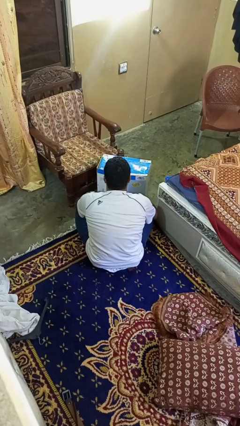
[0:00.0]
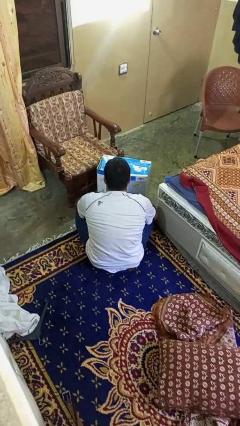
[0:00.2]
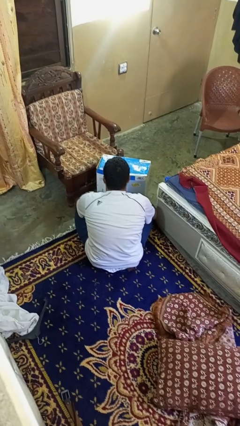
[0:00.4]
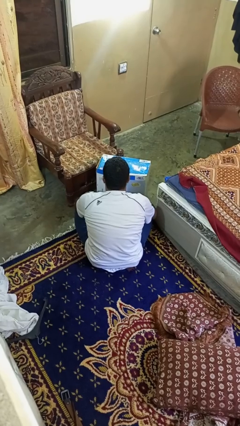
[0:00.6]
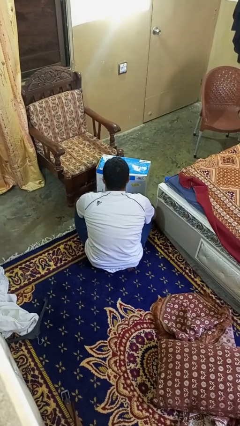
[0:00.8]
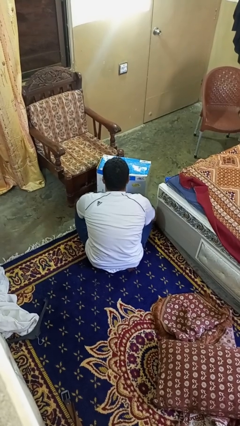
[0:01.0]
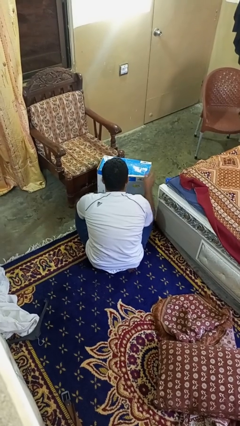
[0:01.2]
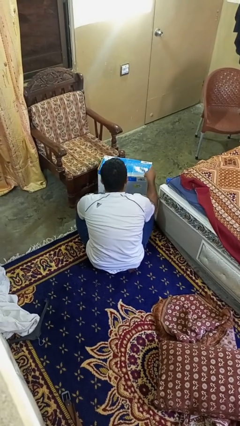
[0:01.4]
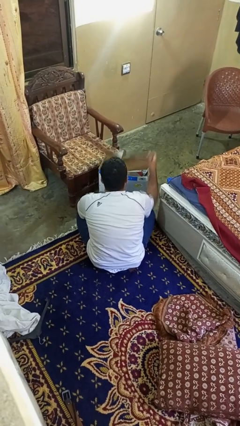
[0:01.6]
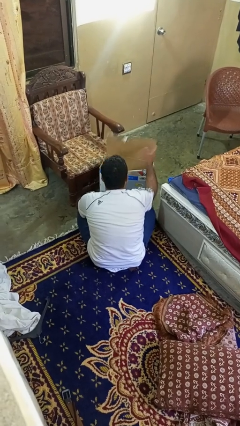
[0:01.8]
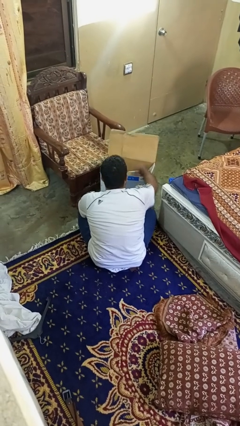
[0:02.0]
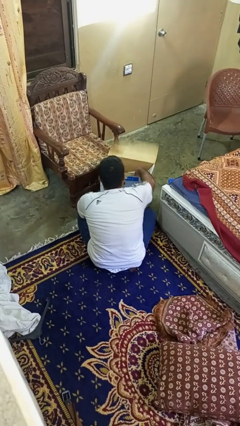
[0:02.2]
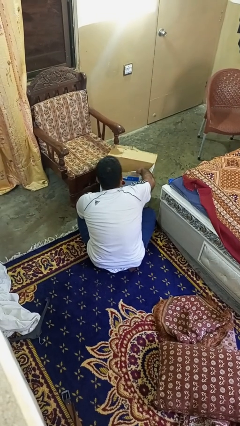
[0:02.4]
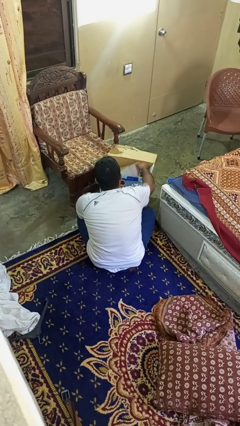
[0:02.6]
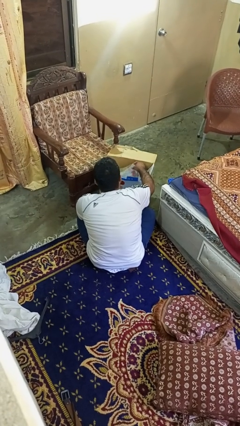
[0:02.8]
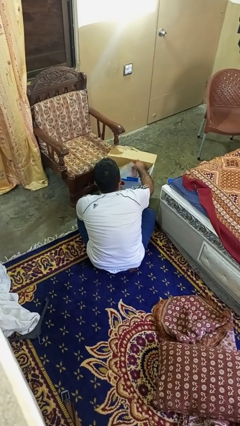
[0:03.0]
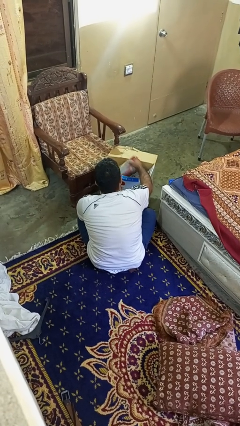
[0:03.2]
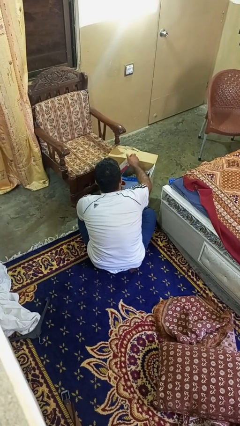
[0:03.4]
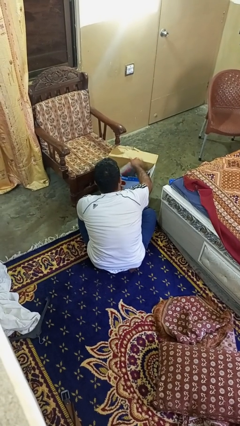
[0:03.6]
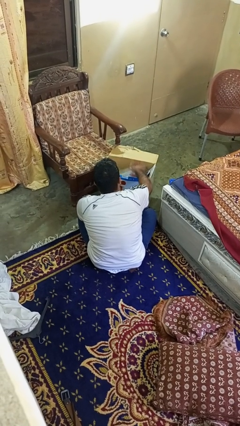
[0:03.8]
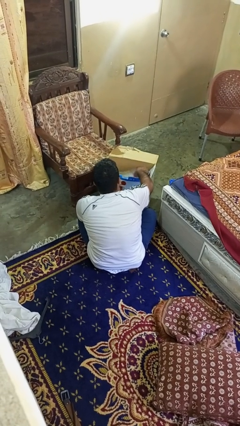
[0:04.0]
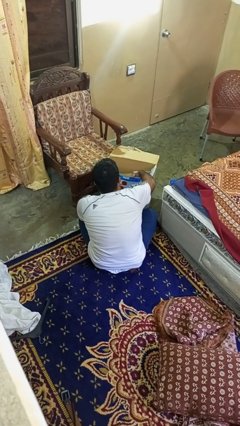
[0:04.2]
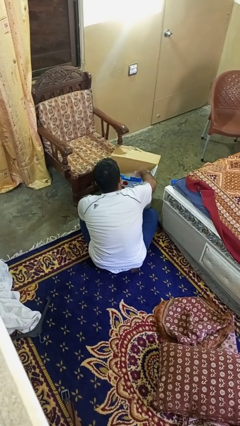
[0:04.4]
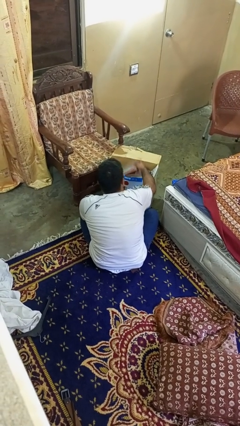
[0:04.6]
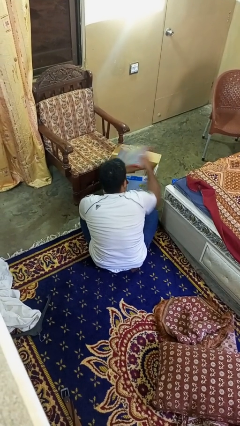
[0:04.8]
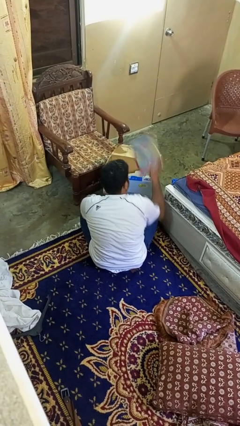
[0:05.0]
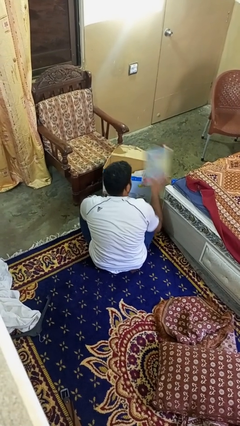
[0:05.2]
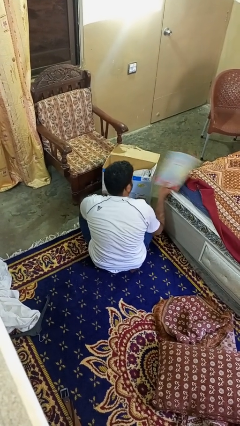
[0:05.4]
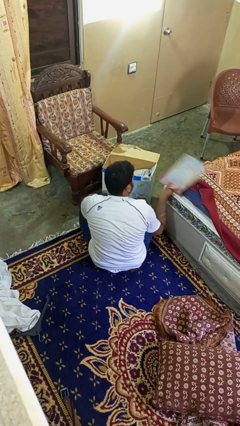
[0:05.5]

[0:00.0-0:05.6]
person takes object from box

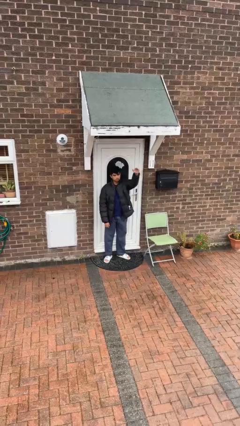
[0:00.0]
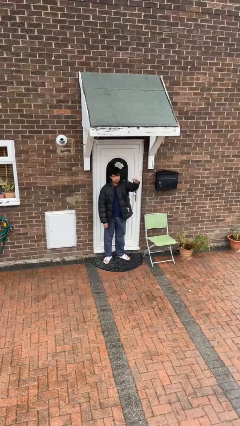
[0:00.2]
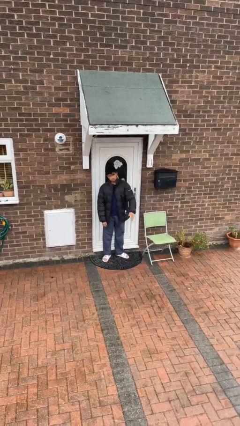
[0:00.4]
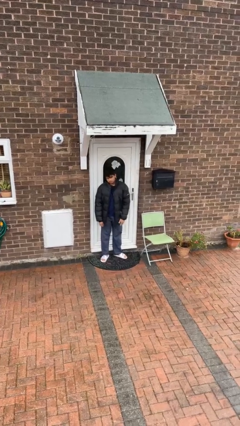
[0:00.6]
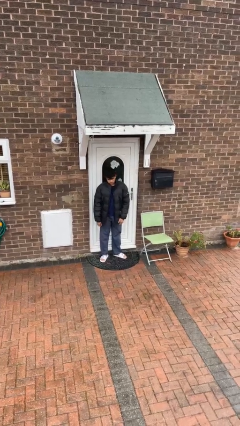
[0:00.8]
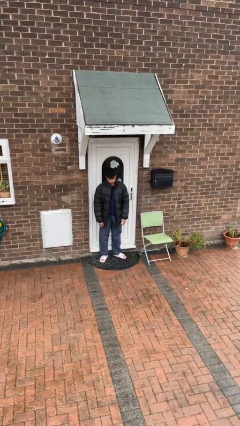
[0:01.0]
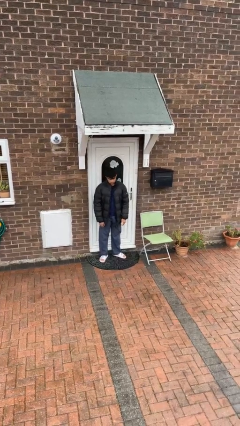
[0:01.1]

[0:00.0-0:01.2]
person gestures swipe down

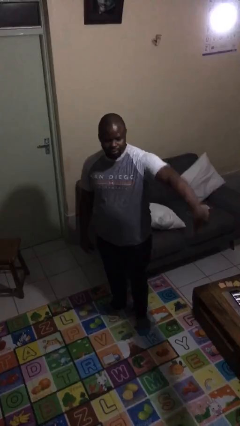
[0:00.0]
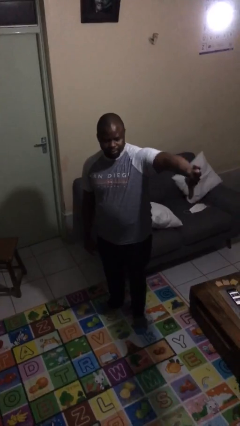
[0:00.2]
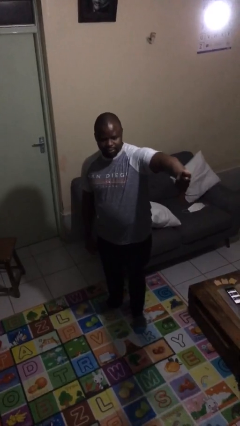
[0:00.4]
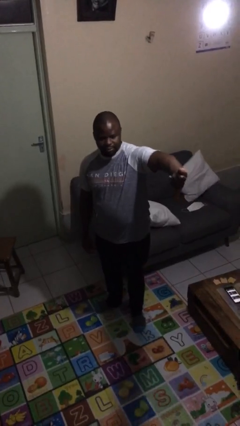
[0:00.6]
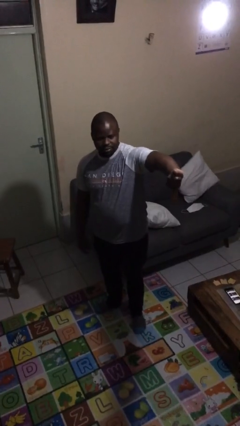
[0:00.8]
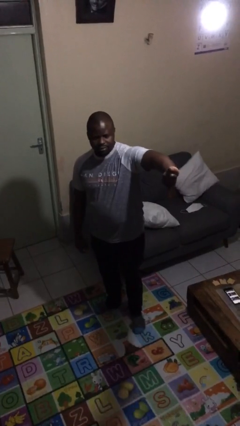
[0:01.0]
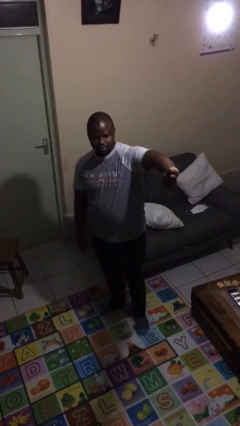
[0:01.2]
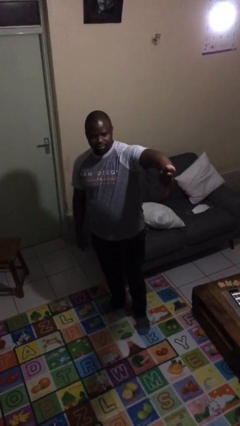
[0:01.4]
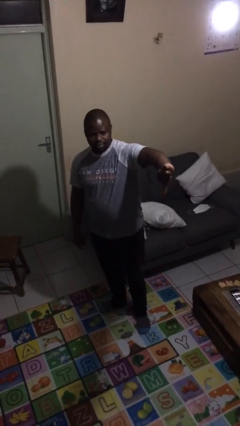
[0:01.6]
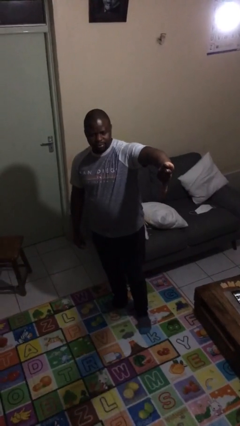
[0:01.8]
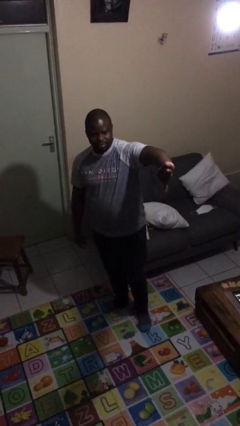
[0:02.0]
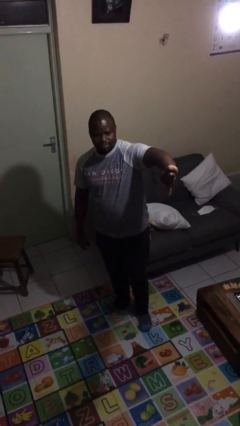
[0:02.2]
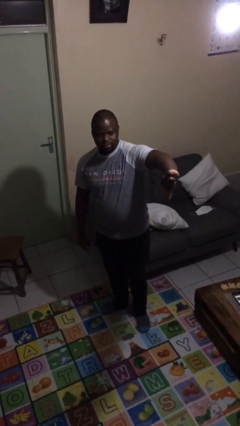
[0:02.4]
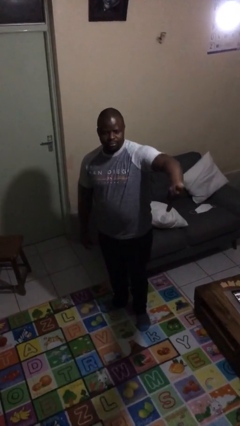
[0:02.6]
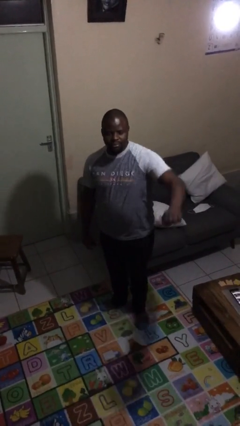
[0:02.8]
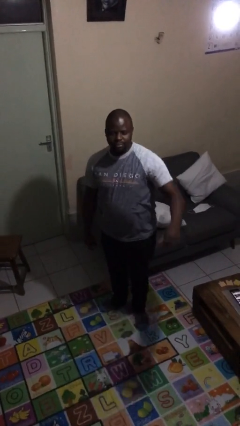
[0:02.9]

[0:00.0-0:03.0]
person gestures thumbs down

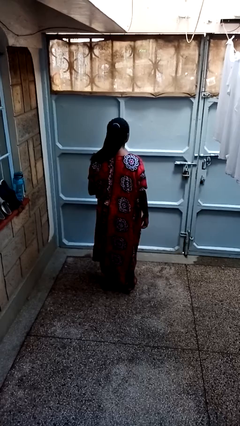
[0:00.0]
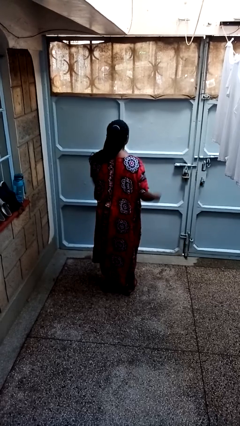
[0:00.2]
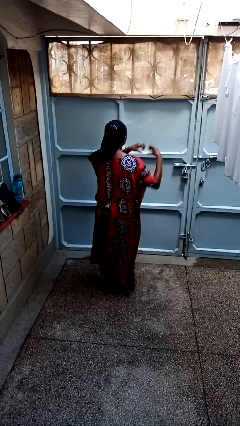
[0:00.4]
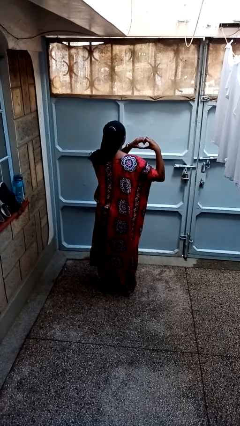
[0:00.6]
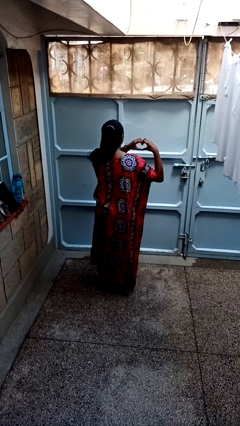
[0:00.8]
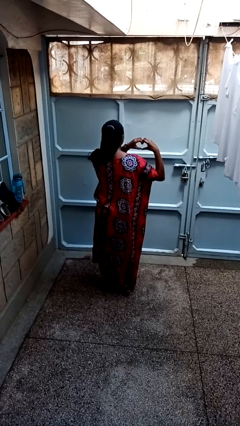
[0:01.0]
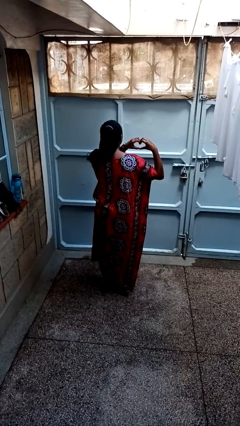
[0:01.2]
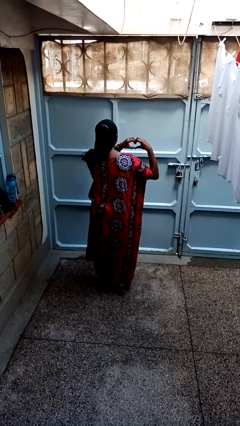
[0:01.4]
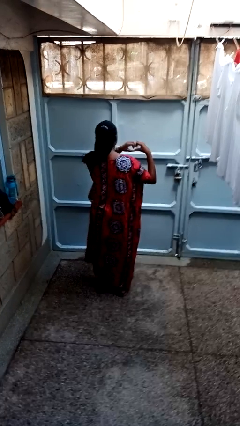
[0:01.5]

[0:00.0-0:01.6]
person gestures heart

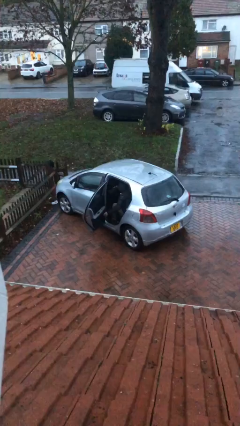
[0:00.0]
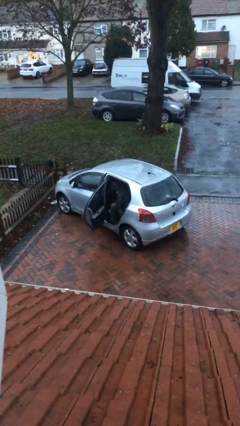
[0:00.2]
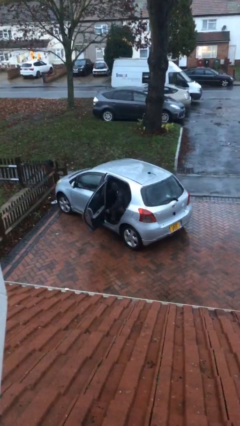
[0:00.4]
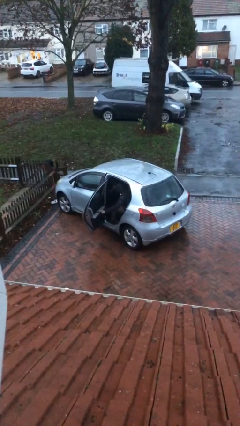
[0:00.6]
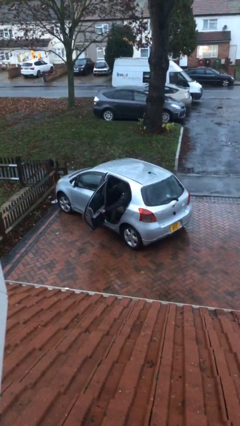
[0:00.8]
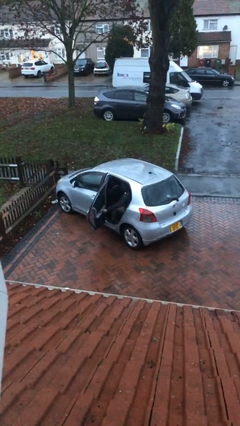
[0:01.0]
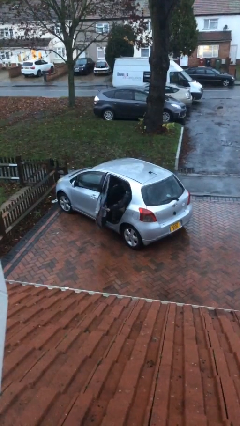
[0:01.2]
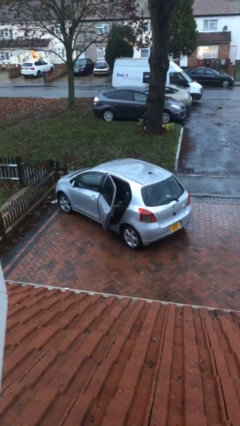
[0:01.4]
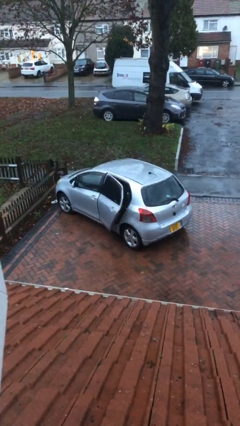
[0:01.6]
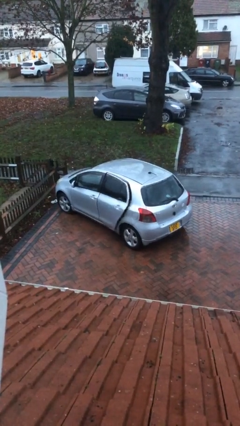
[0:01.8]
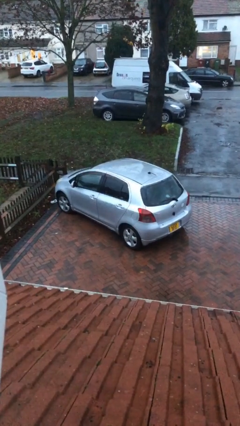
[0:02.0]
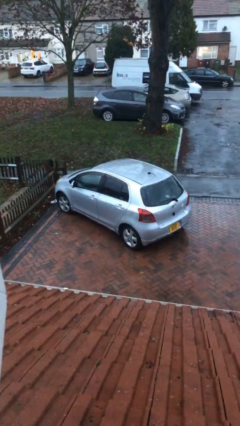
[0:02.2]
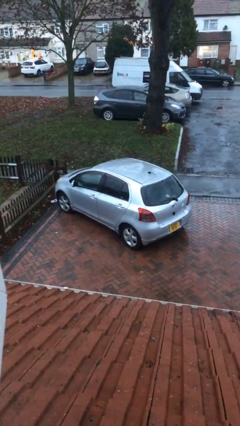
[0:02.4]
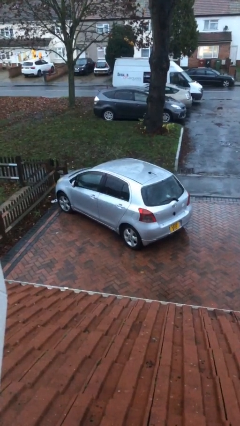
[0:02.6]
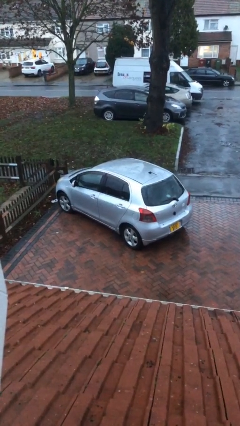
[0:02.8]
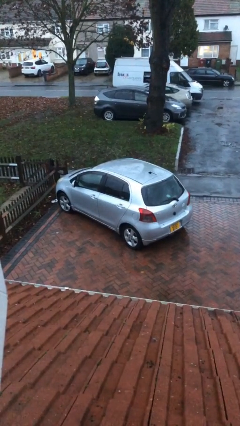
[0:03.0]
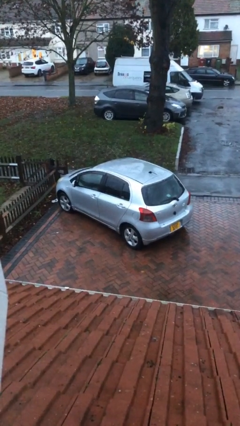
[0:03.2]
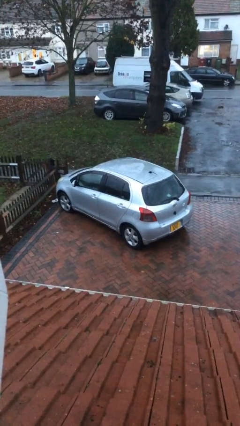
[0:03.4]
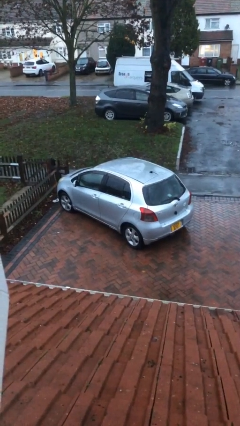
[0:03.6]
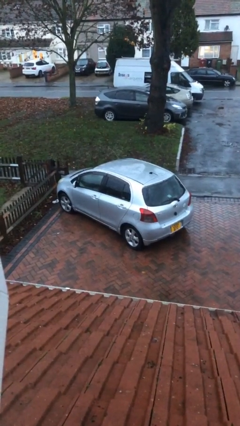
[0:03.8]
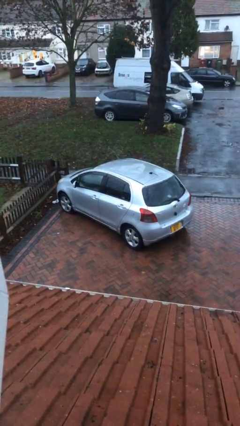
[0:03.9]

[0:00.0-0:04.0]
person closes car door

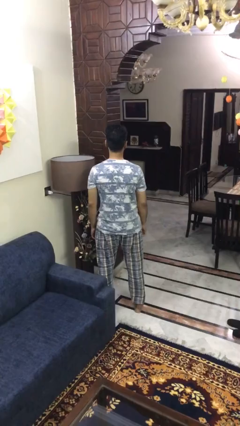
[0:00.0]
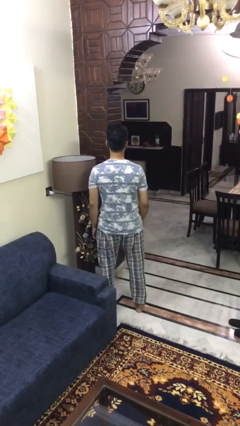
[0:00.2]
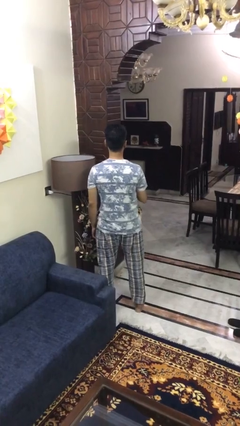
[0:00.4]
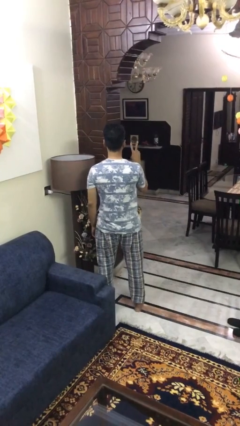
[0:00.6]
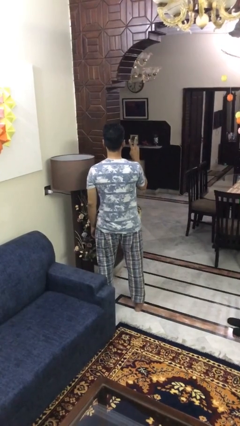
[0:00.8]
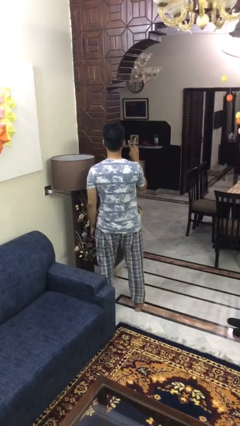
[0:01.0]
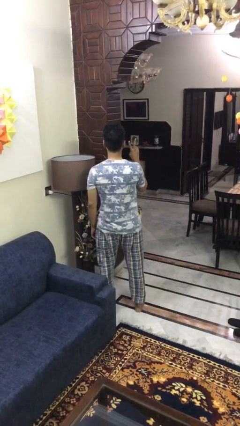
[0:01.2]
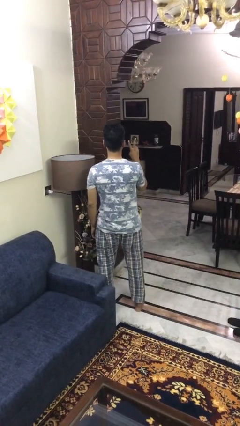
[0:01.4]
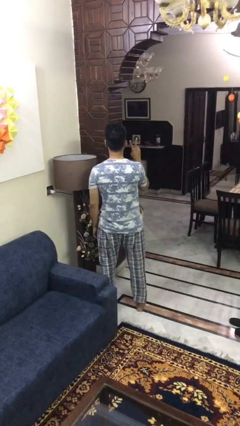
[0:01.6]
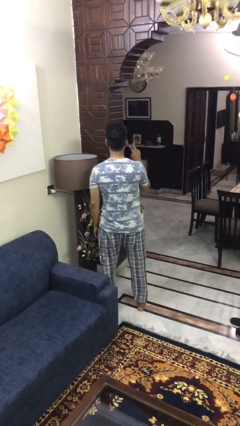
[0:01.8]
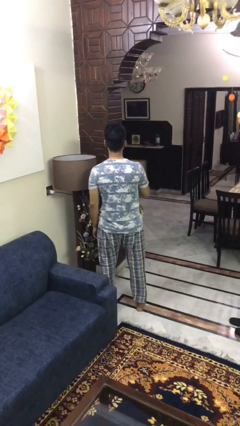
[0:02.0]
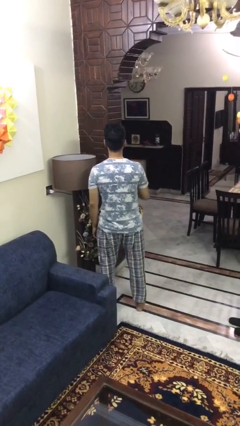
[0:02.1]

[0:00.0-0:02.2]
person gestures peace

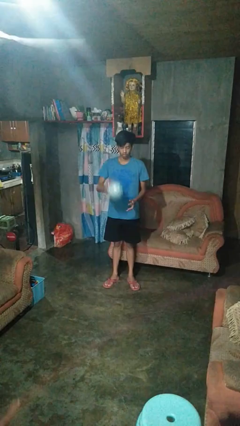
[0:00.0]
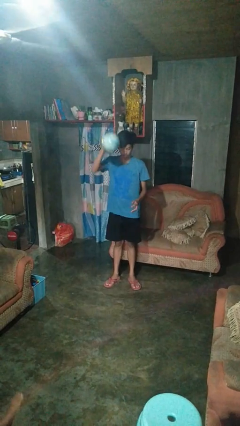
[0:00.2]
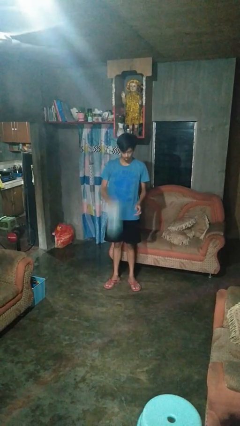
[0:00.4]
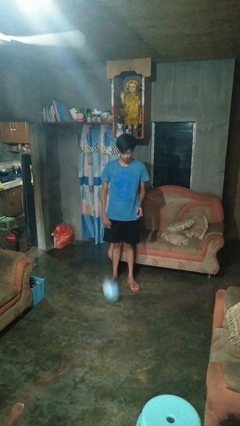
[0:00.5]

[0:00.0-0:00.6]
person bounces ball on floor
